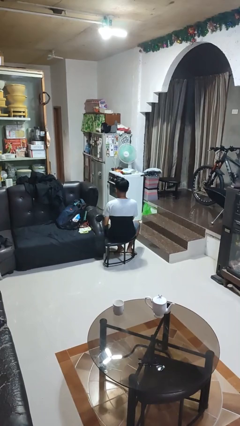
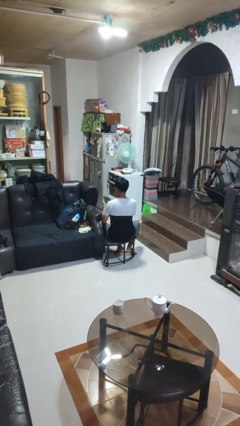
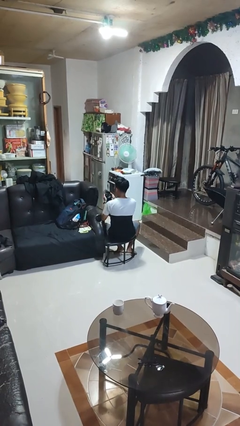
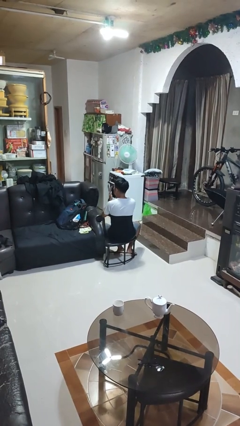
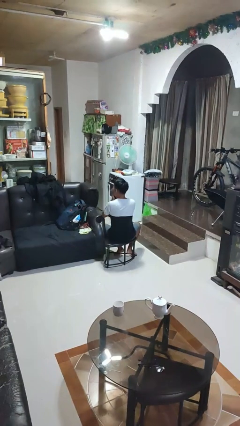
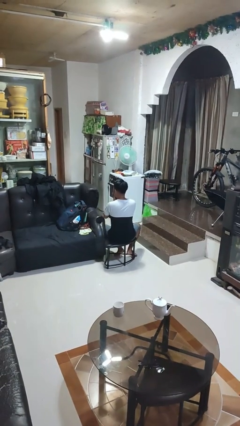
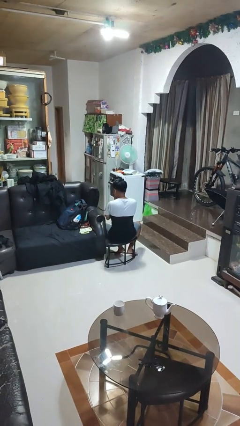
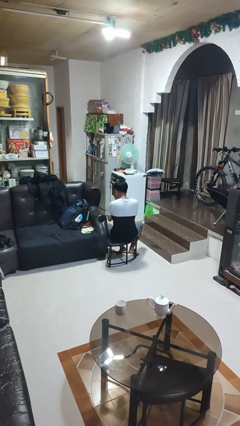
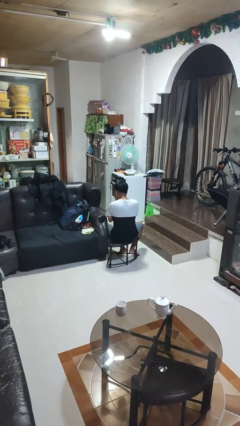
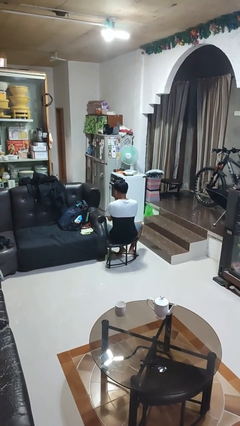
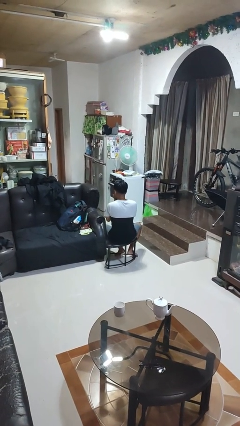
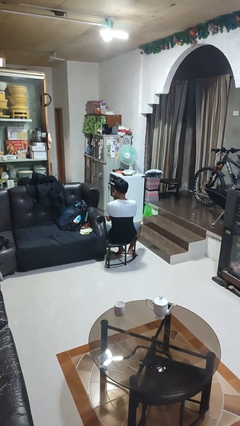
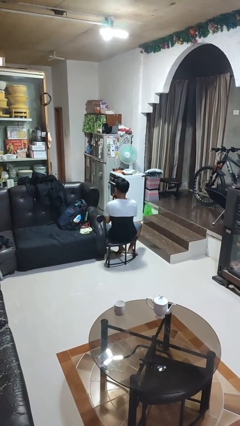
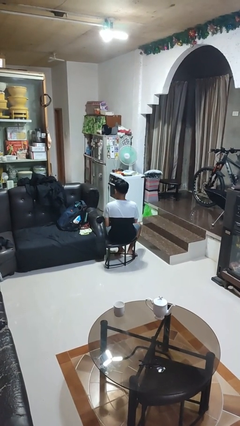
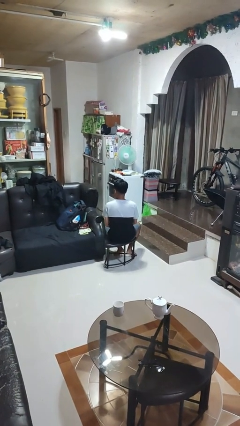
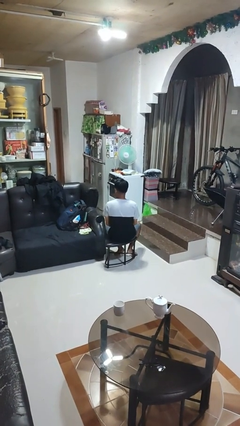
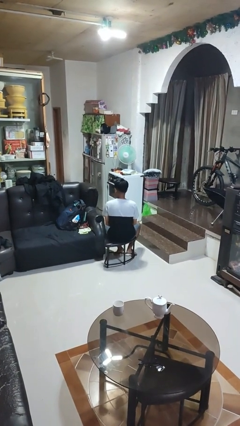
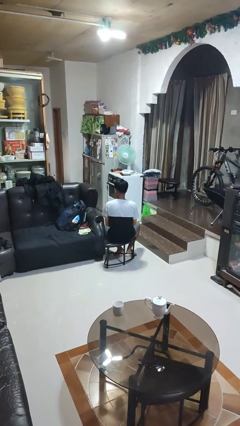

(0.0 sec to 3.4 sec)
person blows nose

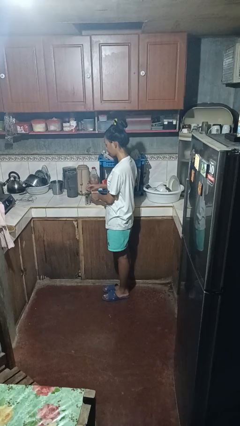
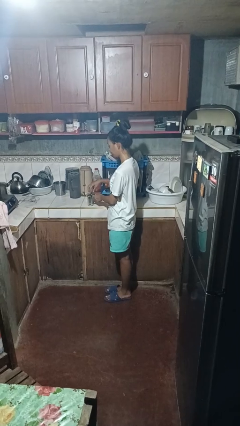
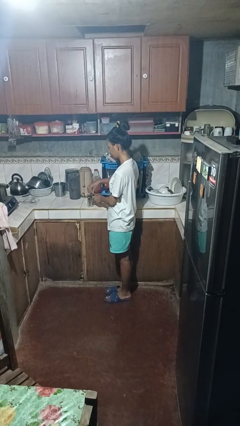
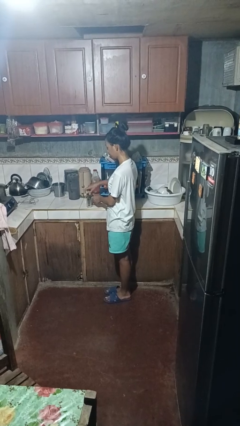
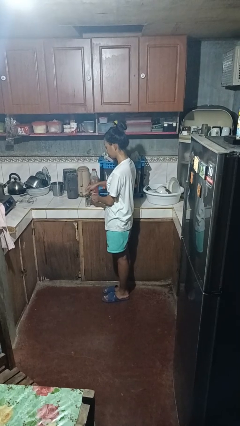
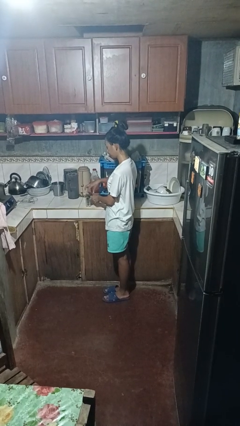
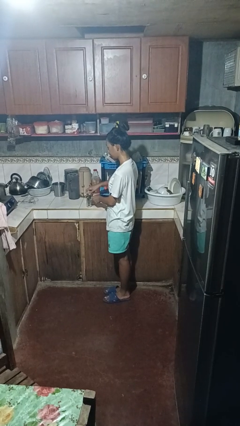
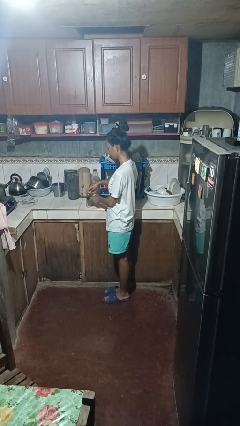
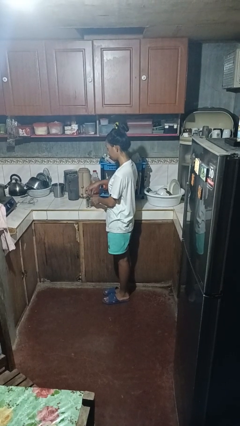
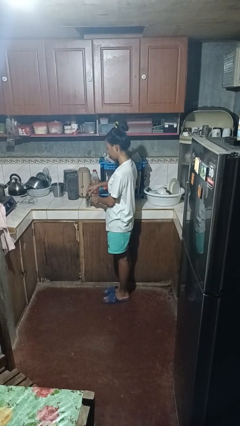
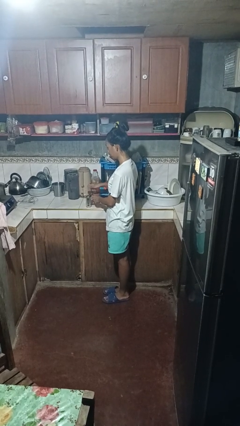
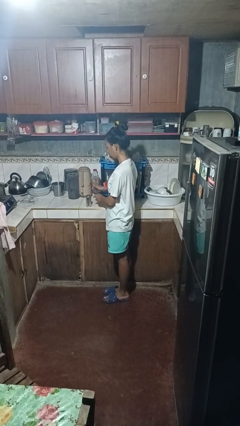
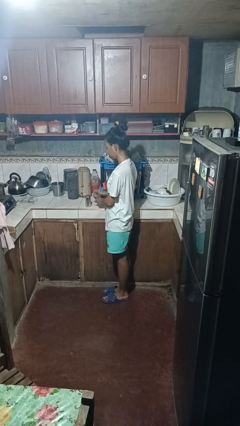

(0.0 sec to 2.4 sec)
person opens can with can opener

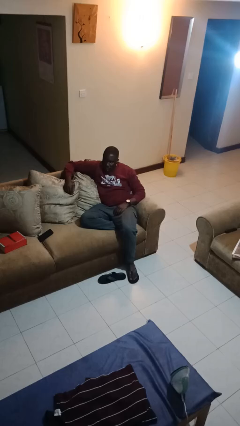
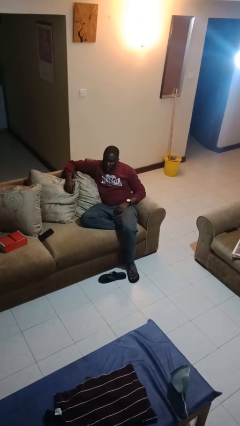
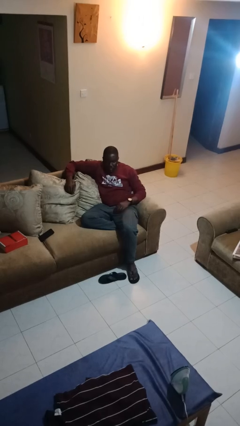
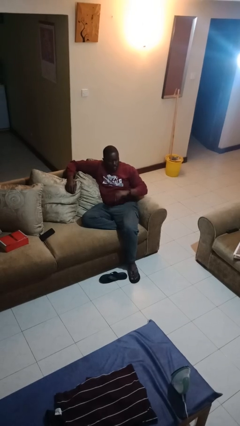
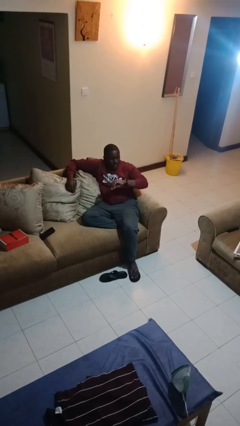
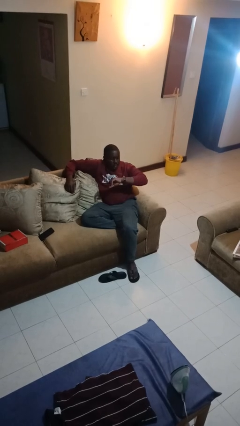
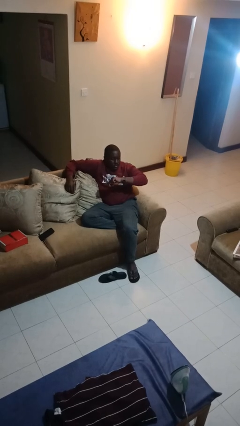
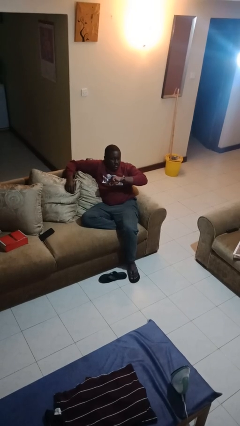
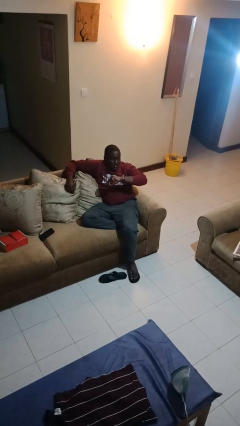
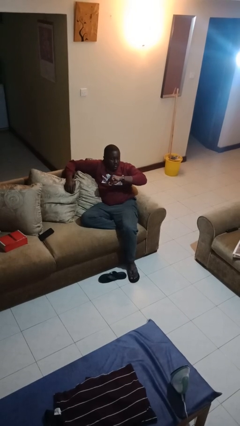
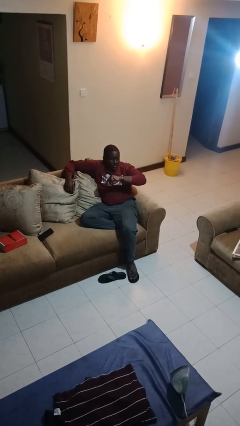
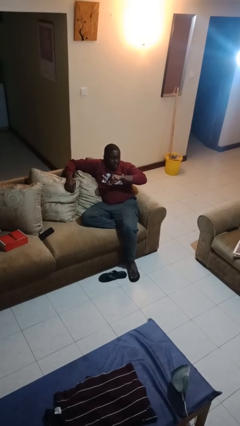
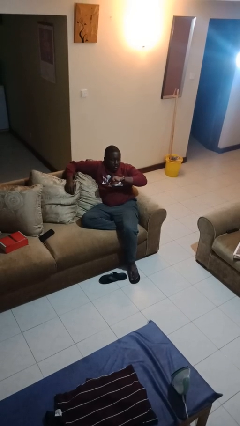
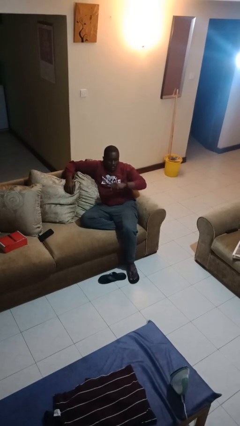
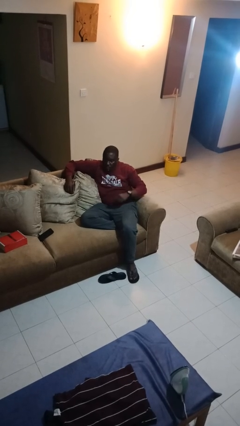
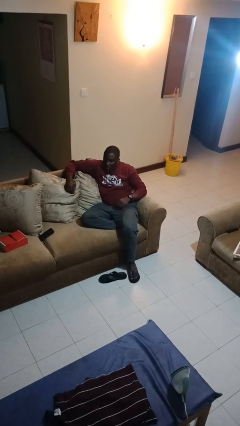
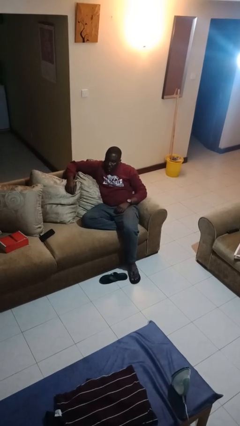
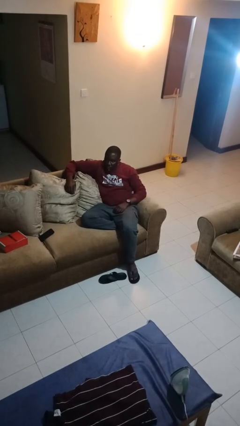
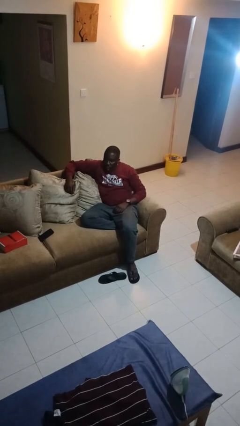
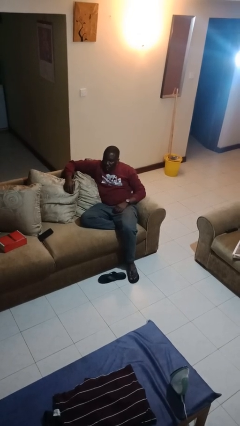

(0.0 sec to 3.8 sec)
person looks at wristwatch

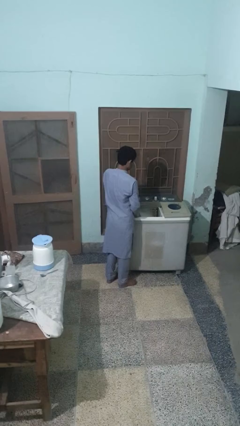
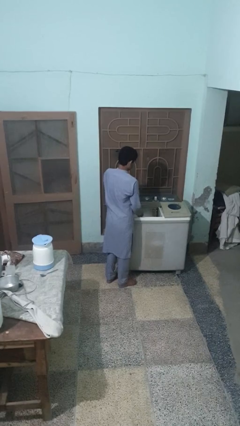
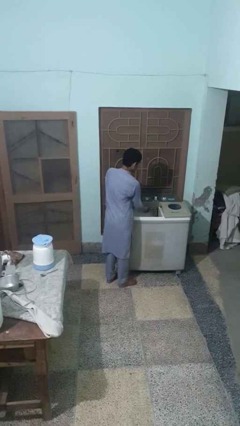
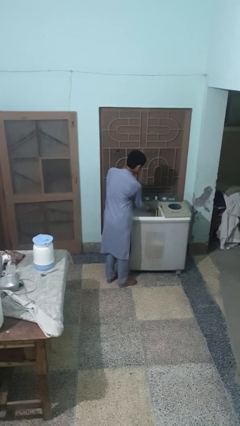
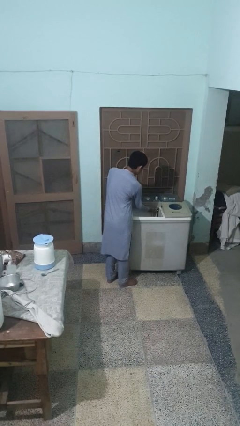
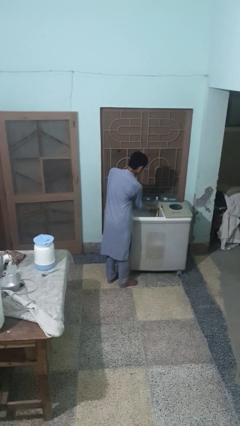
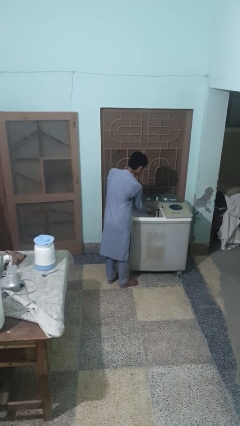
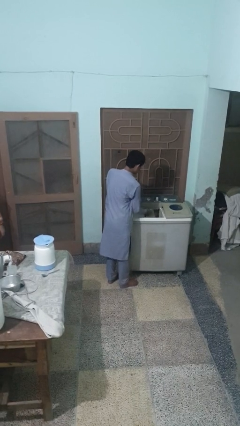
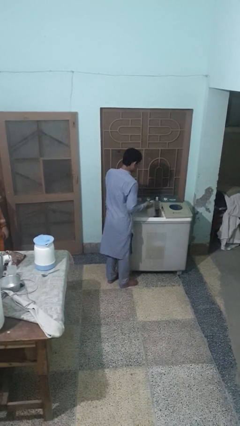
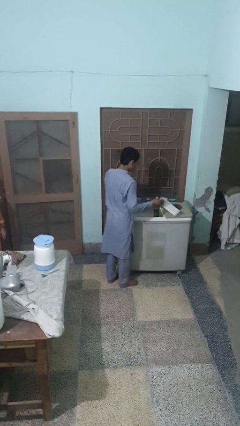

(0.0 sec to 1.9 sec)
person cleans dryer lint trap

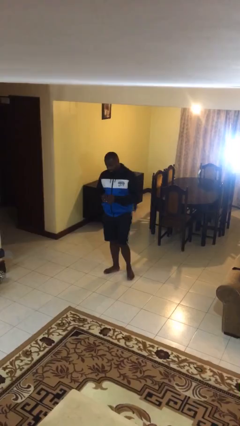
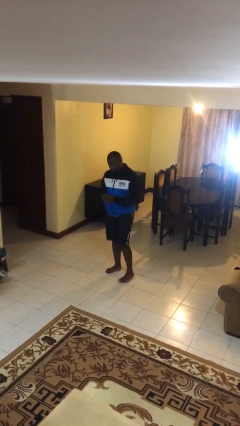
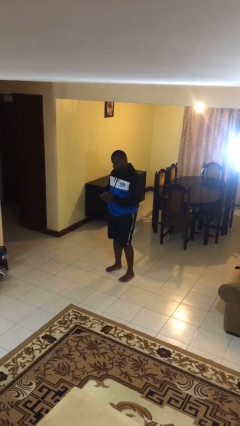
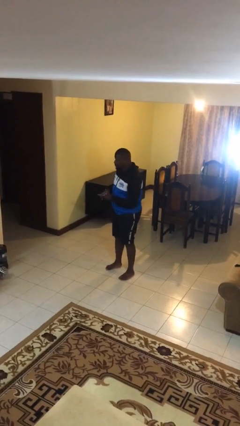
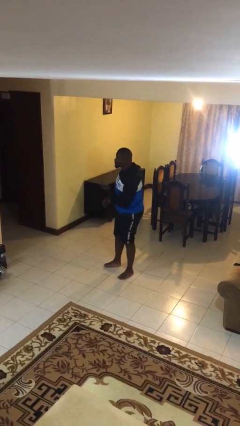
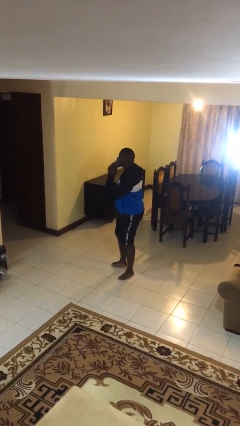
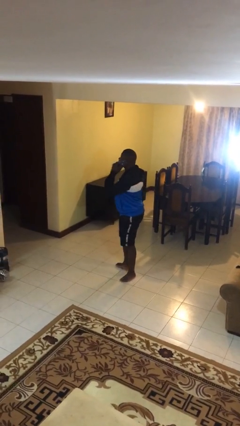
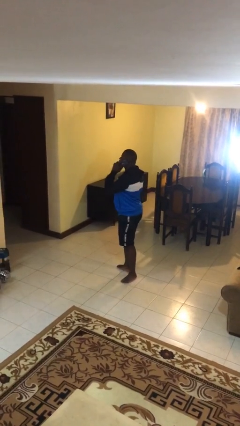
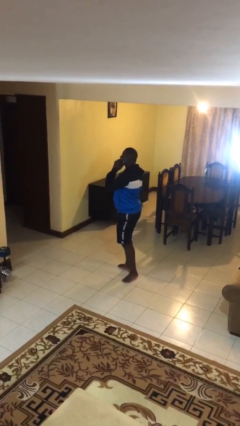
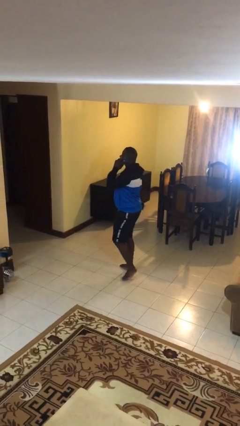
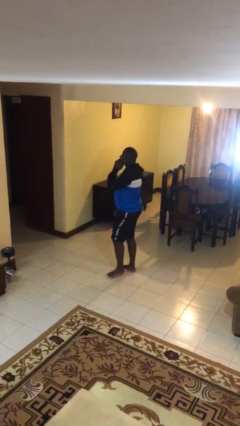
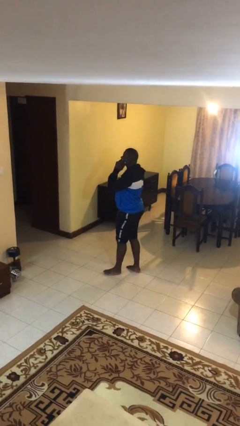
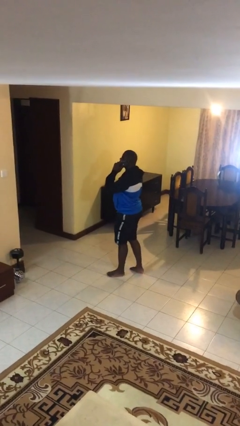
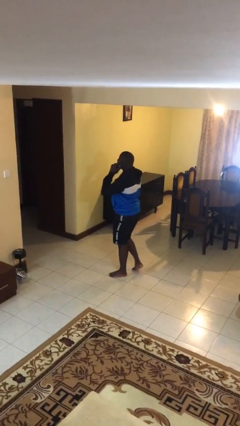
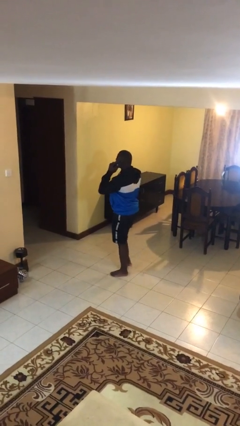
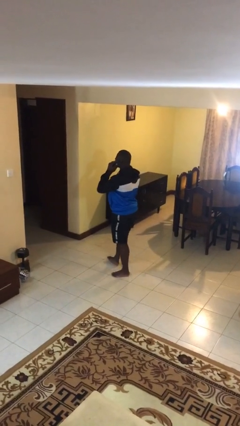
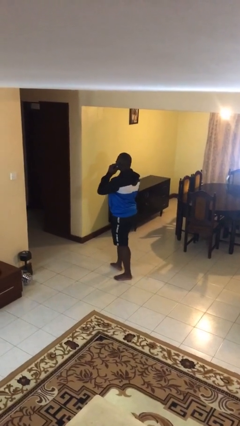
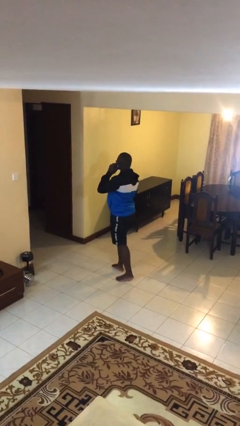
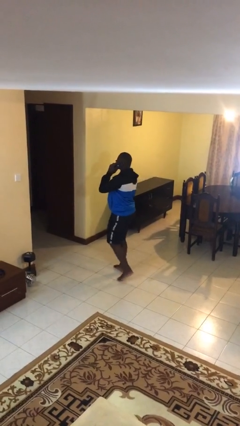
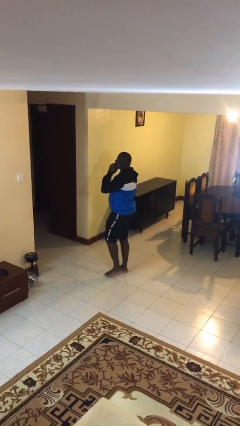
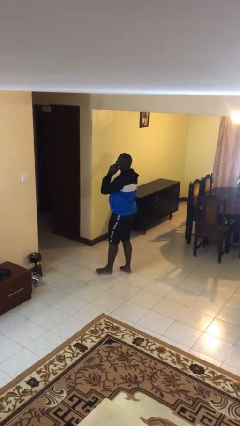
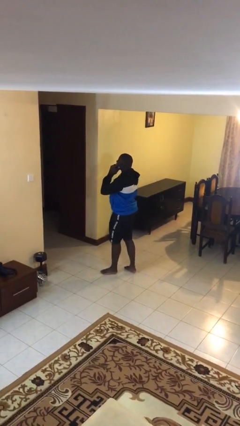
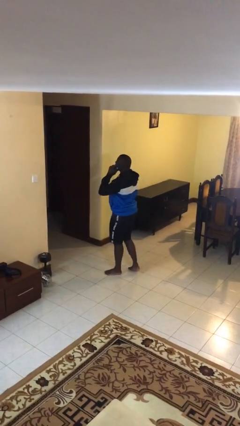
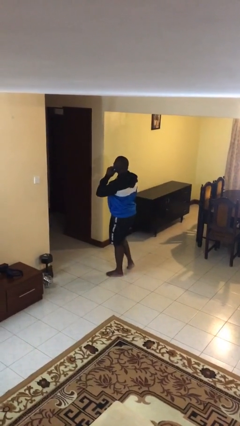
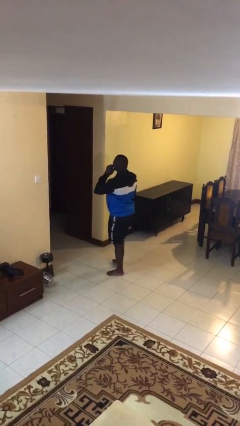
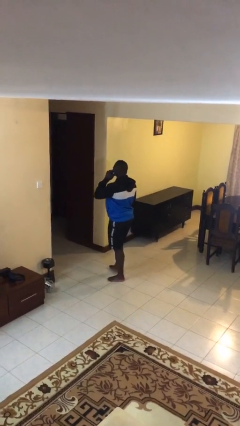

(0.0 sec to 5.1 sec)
person talks on phone

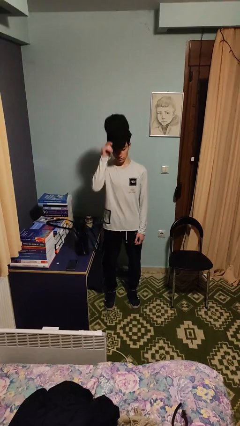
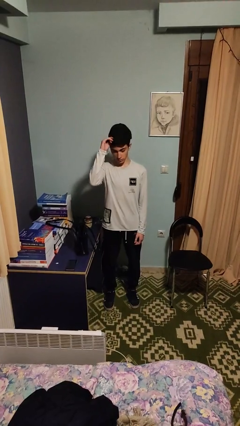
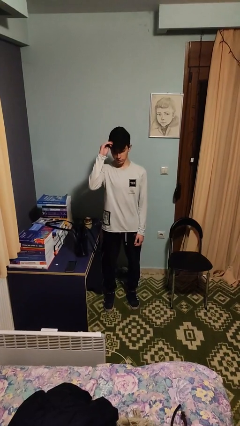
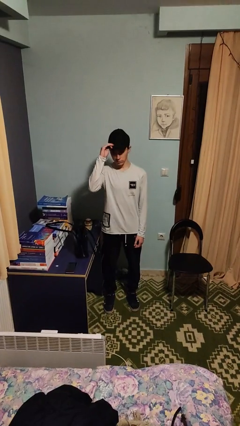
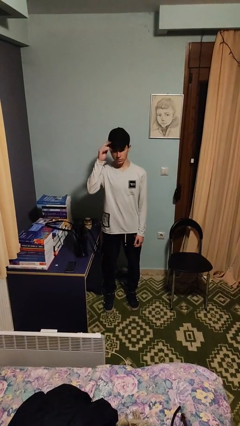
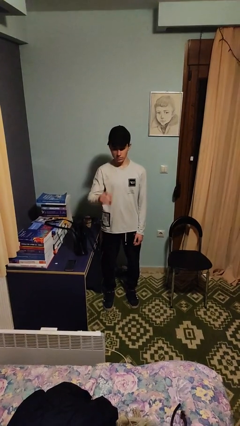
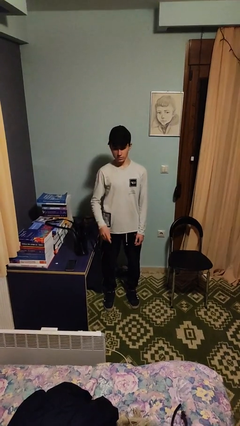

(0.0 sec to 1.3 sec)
person puts on hat
